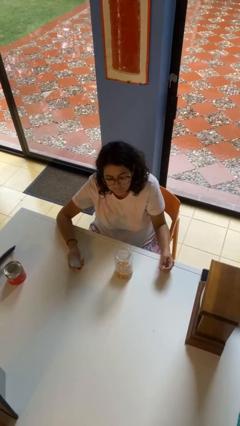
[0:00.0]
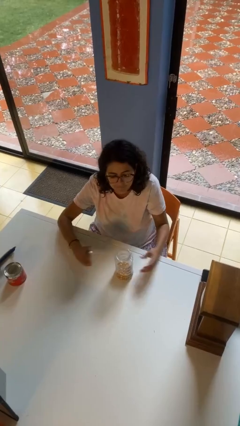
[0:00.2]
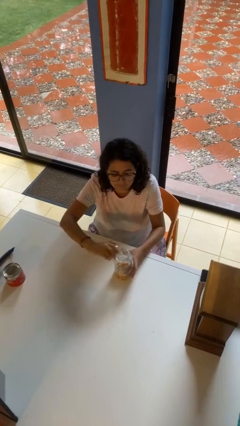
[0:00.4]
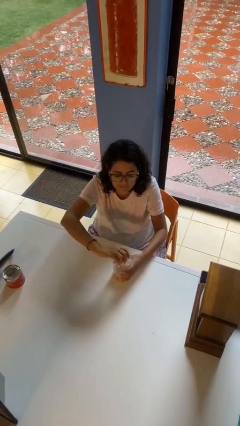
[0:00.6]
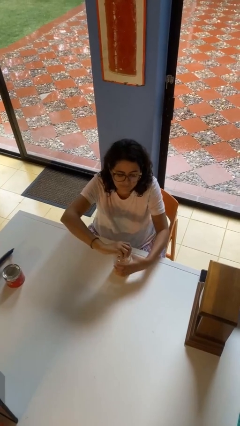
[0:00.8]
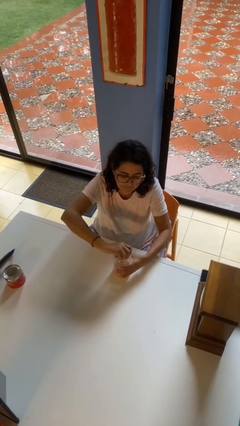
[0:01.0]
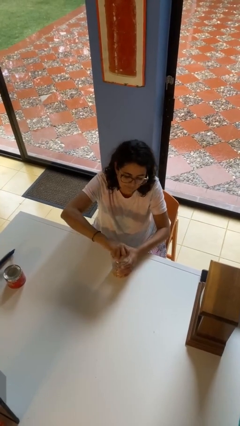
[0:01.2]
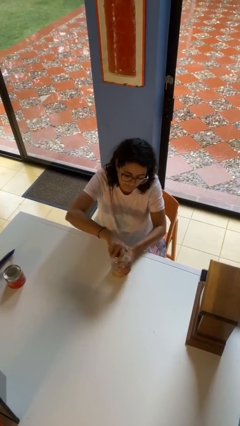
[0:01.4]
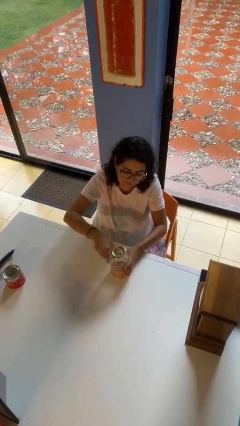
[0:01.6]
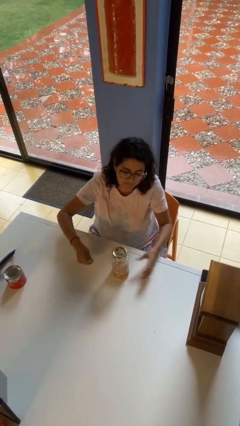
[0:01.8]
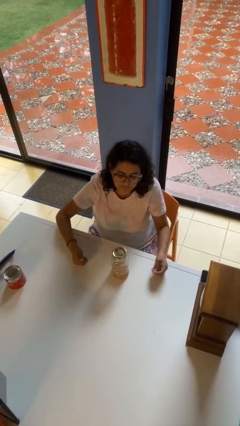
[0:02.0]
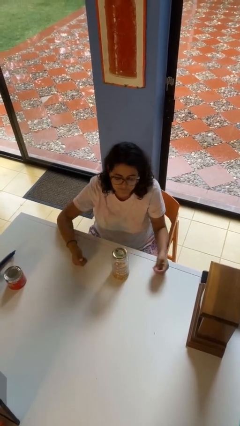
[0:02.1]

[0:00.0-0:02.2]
person closes jar

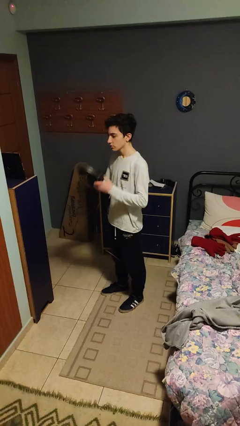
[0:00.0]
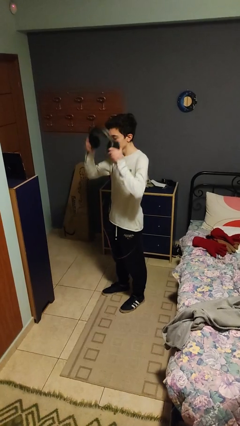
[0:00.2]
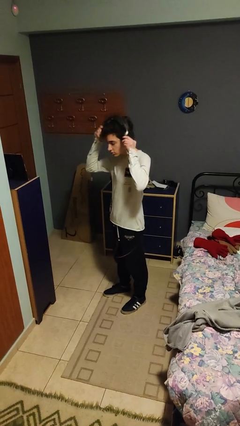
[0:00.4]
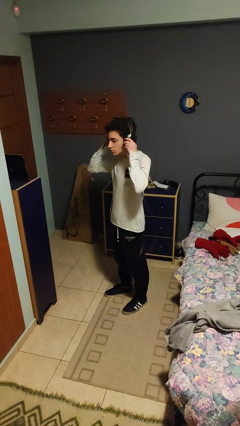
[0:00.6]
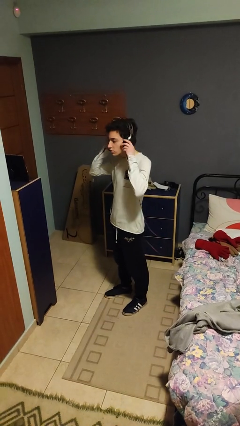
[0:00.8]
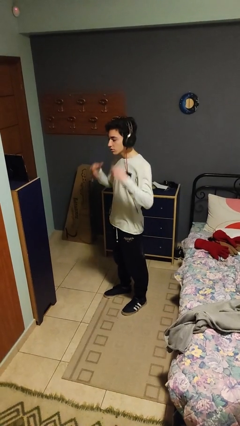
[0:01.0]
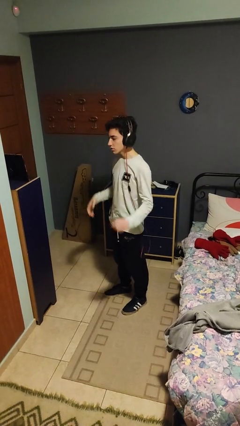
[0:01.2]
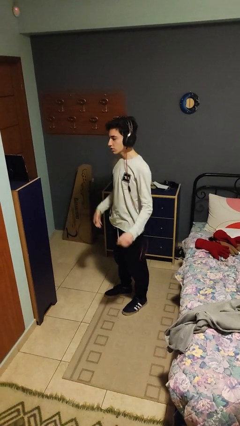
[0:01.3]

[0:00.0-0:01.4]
person puts on headphones

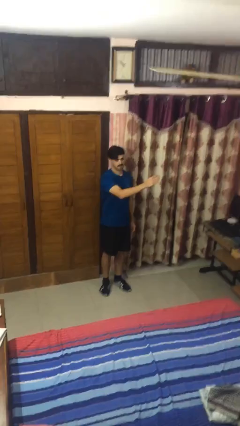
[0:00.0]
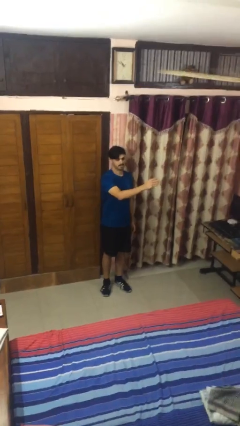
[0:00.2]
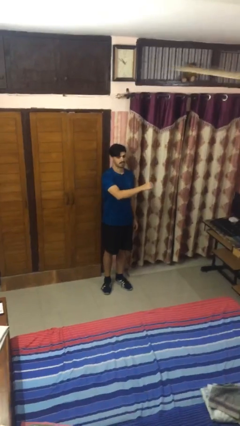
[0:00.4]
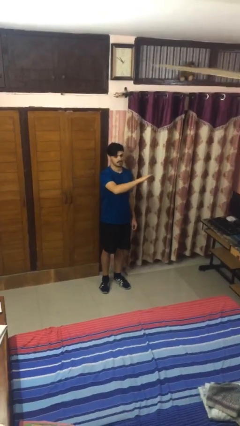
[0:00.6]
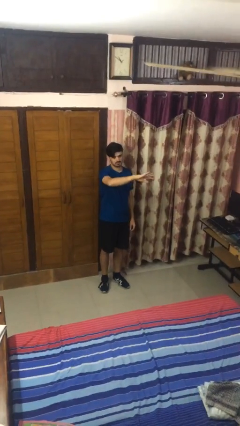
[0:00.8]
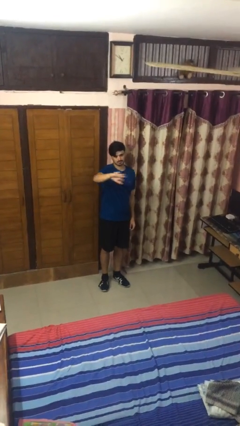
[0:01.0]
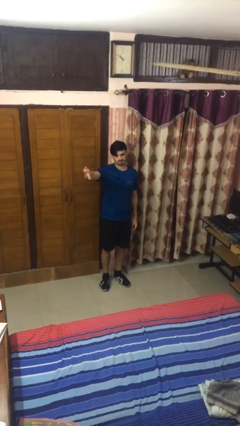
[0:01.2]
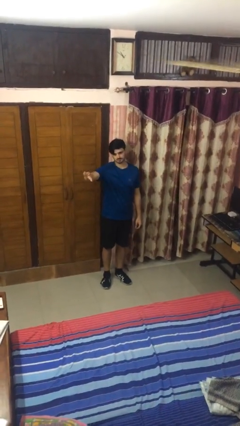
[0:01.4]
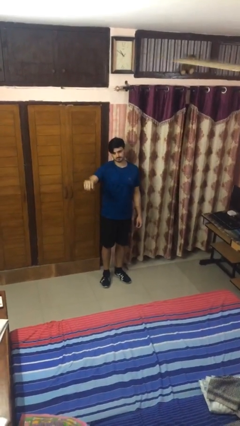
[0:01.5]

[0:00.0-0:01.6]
person gestures swipe right

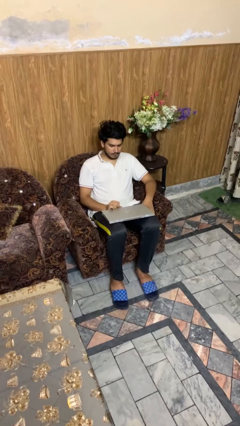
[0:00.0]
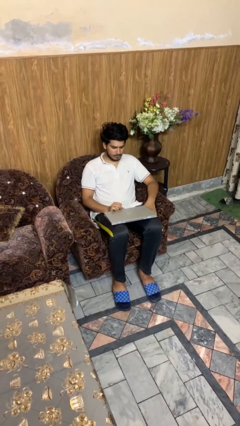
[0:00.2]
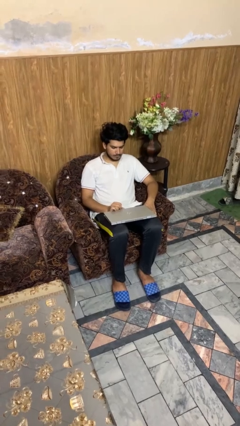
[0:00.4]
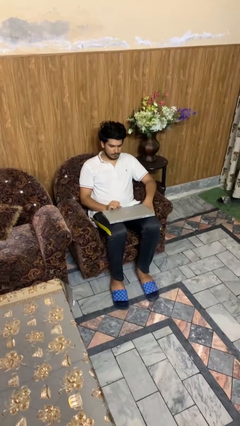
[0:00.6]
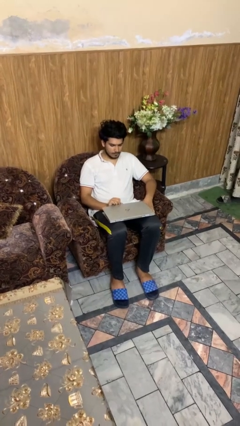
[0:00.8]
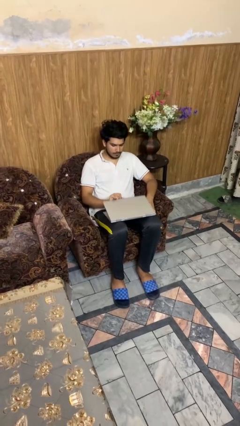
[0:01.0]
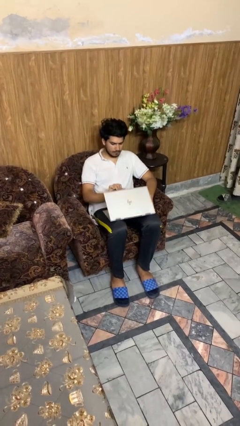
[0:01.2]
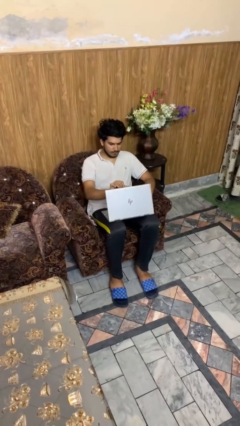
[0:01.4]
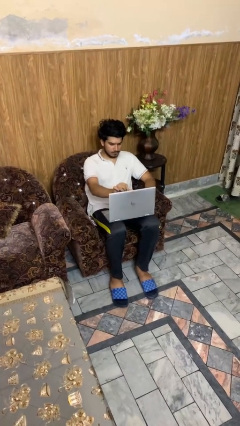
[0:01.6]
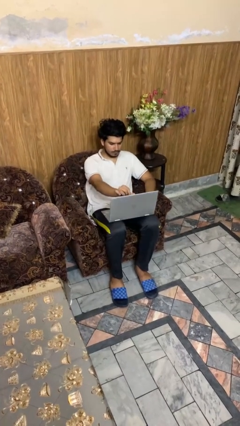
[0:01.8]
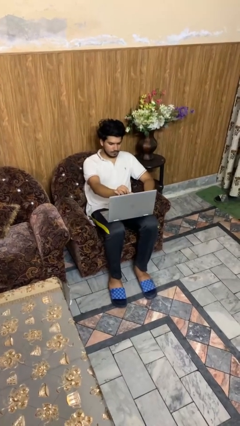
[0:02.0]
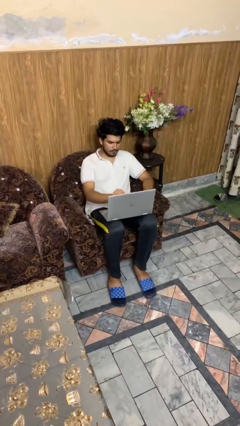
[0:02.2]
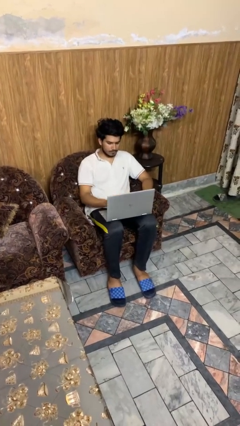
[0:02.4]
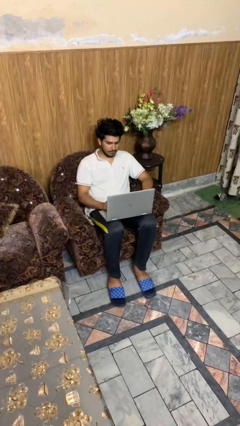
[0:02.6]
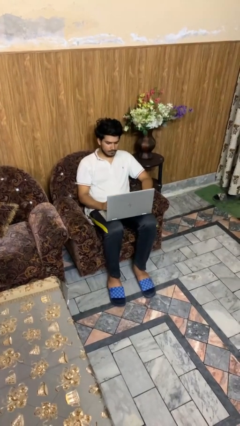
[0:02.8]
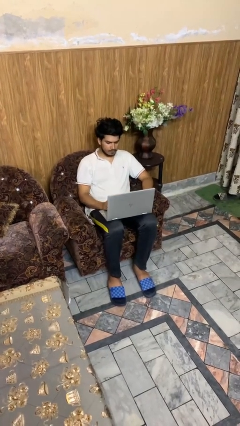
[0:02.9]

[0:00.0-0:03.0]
person opens laptop

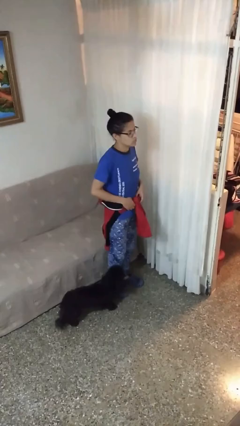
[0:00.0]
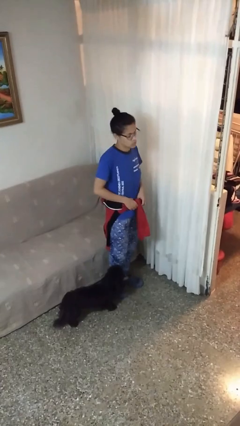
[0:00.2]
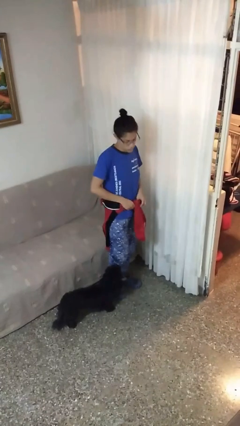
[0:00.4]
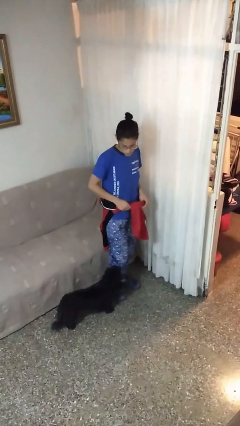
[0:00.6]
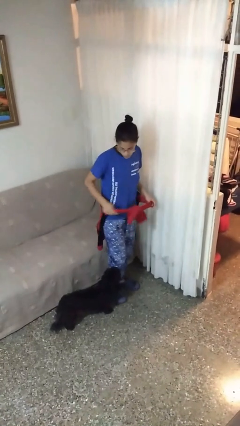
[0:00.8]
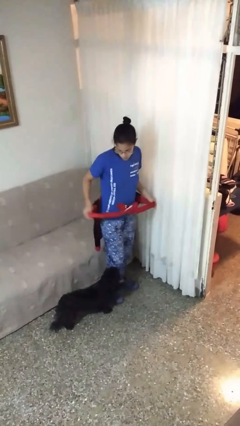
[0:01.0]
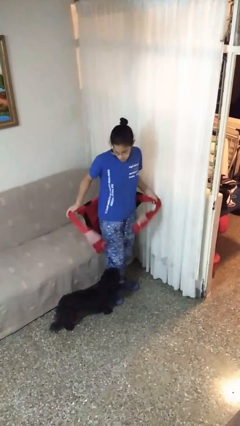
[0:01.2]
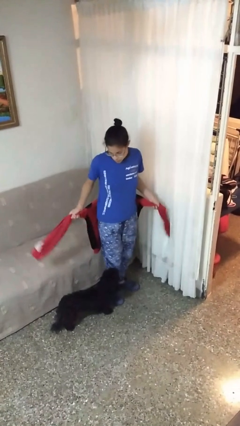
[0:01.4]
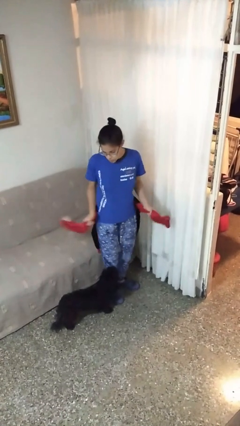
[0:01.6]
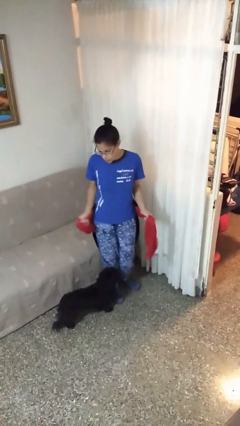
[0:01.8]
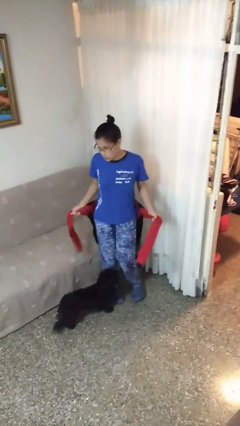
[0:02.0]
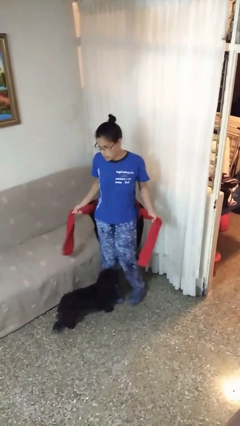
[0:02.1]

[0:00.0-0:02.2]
person unties jacket around waist

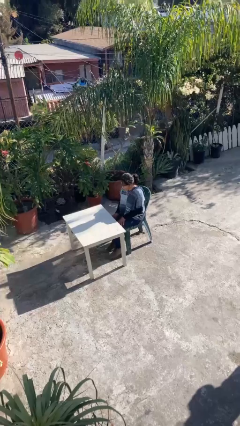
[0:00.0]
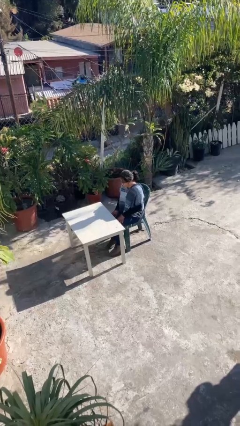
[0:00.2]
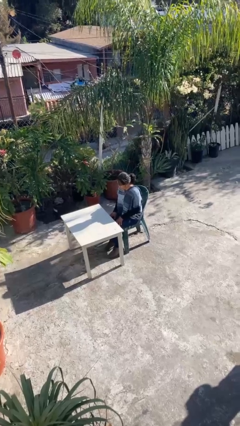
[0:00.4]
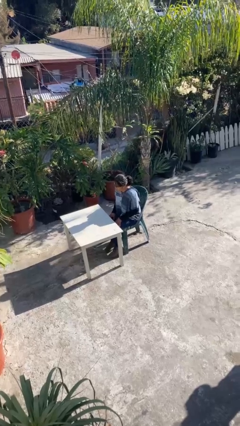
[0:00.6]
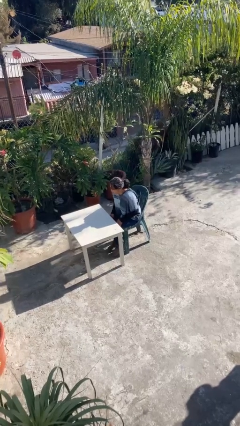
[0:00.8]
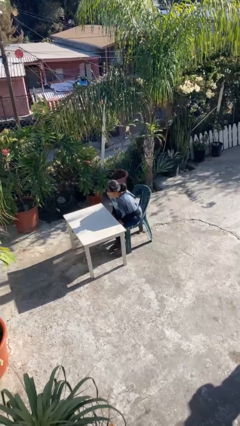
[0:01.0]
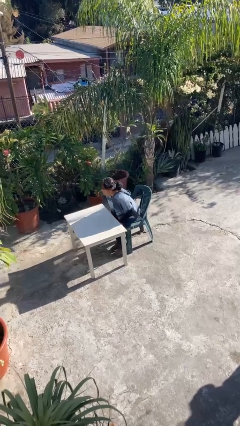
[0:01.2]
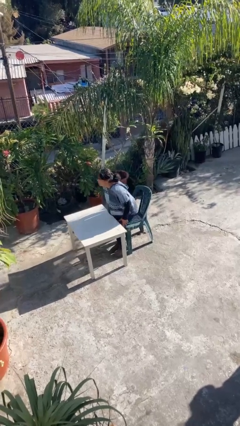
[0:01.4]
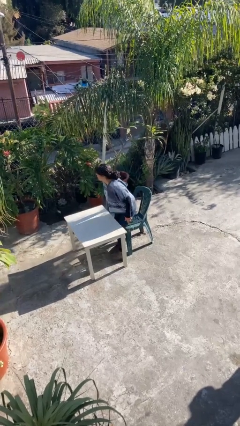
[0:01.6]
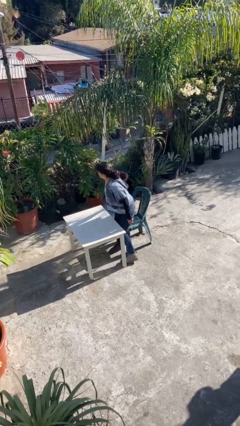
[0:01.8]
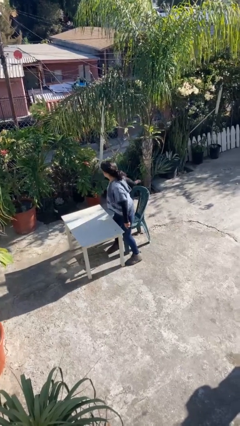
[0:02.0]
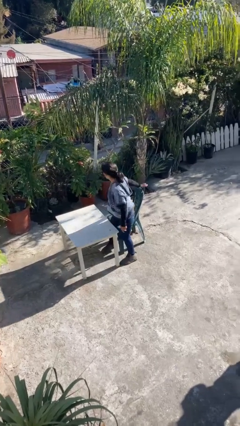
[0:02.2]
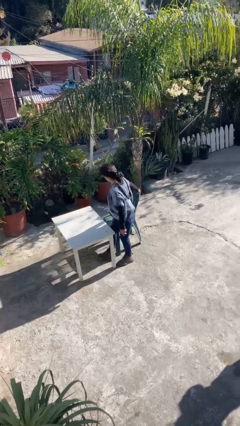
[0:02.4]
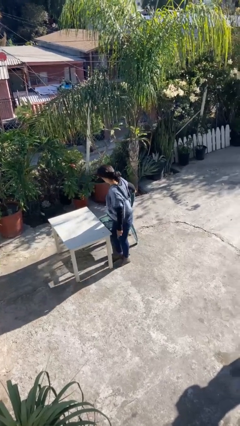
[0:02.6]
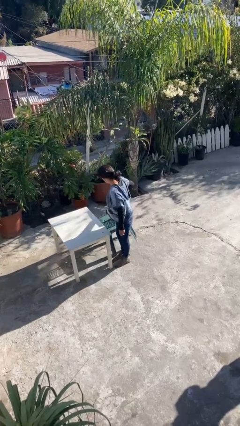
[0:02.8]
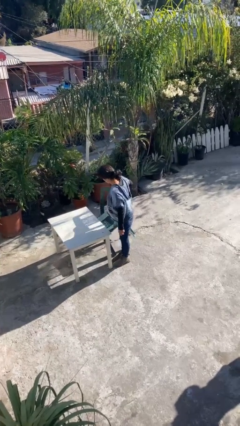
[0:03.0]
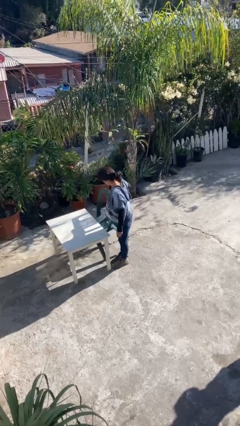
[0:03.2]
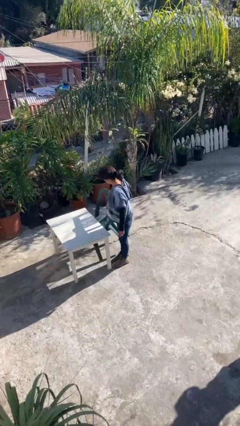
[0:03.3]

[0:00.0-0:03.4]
person stands up

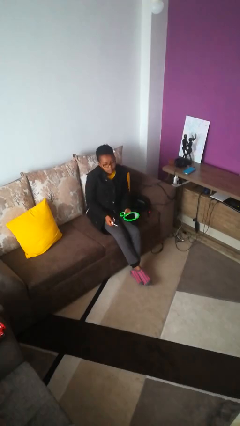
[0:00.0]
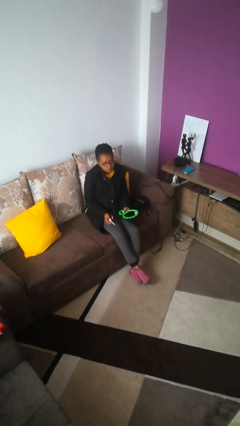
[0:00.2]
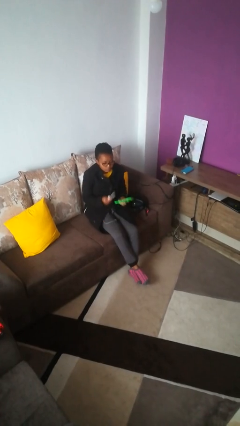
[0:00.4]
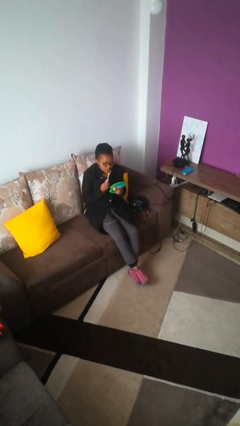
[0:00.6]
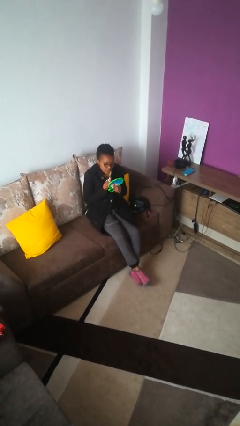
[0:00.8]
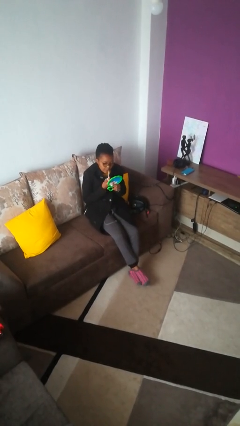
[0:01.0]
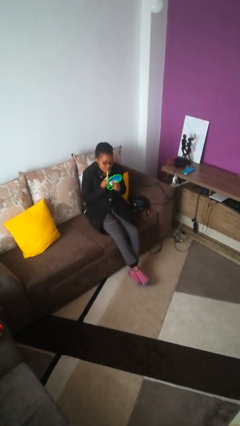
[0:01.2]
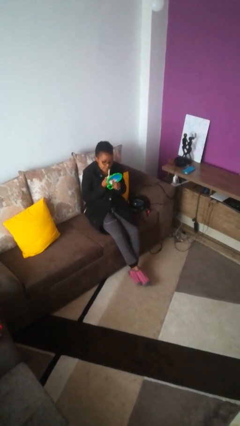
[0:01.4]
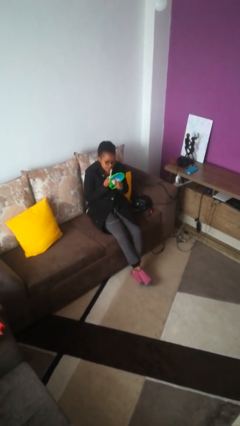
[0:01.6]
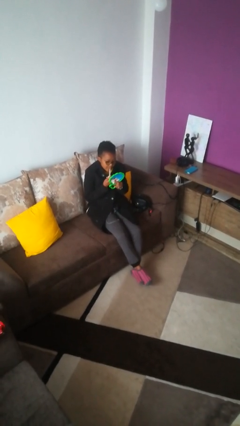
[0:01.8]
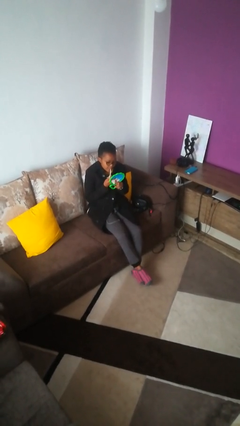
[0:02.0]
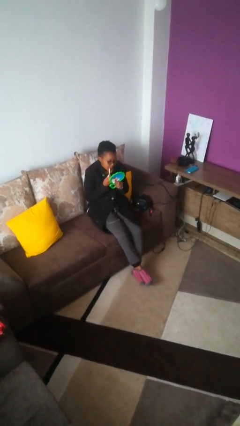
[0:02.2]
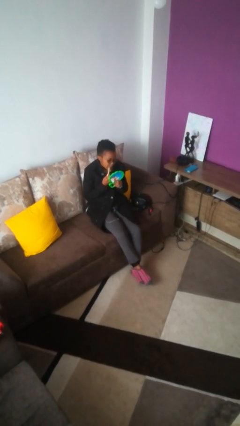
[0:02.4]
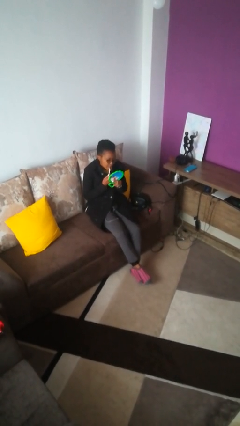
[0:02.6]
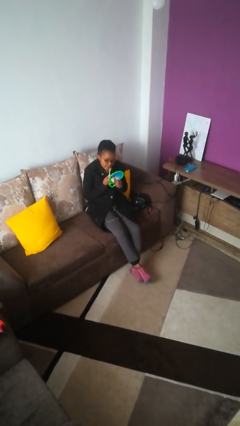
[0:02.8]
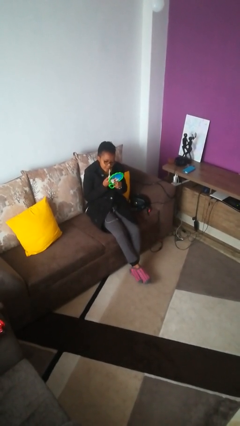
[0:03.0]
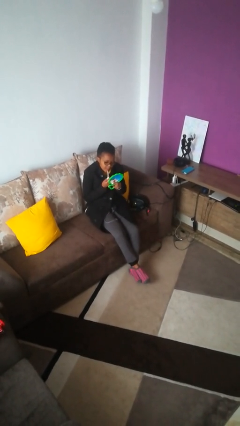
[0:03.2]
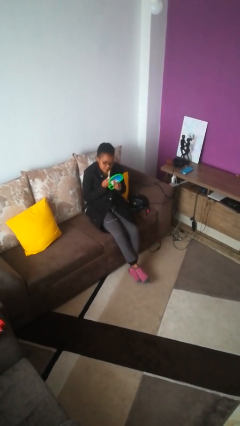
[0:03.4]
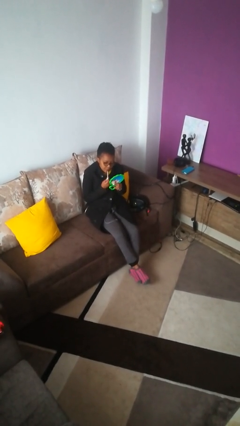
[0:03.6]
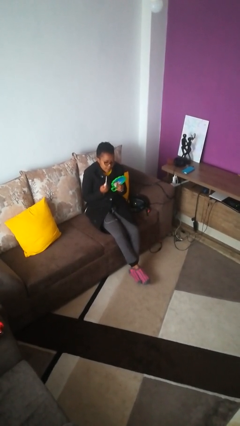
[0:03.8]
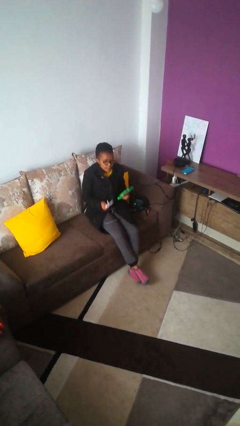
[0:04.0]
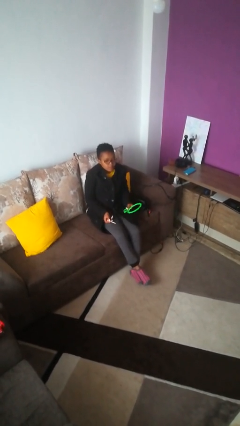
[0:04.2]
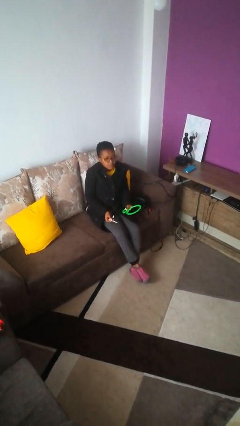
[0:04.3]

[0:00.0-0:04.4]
person applies lip makeup
